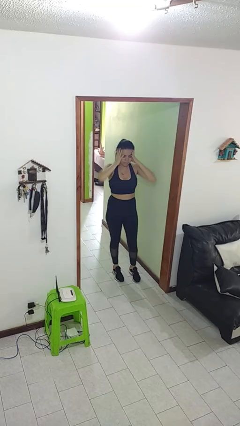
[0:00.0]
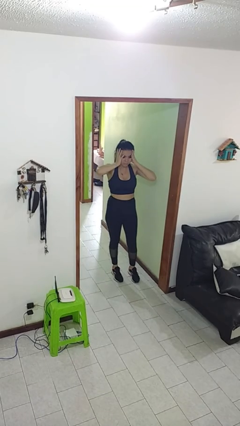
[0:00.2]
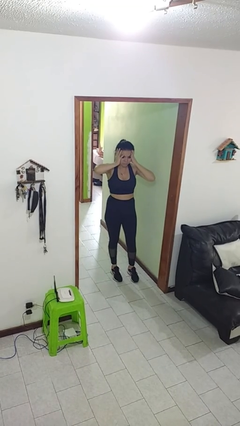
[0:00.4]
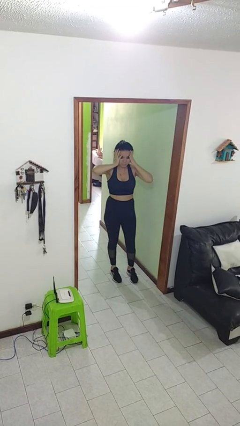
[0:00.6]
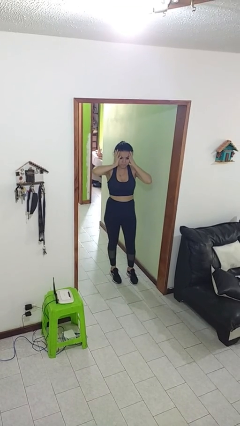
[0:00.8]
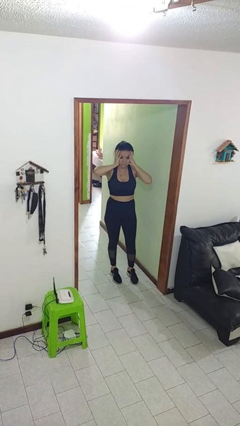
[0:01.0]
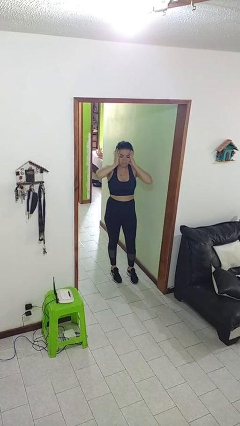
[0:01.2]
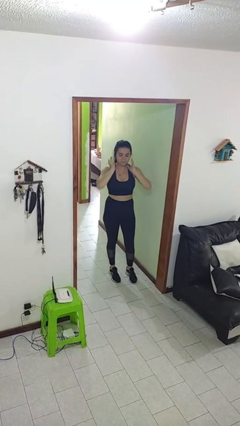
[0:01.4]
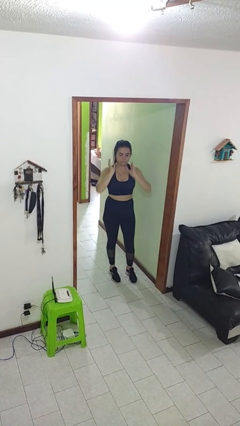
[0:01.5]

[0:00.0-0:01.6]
person covers face with hands

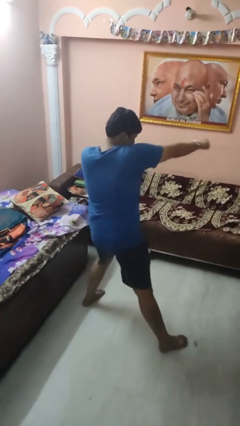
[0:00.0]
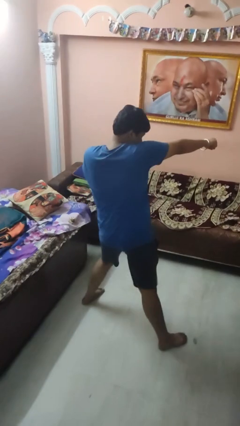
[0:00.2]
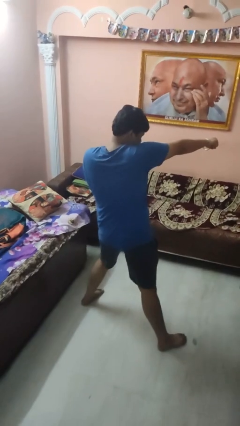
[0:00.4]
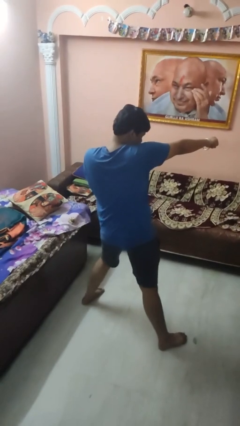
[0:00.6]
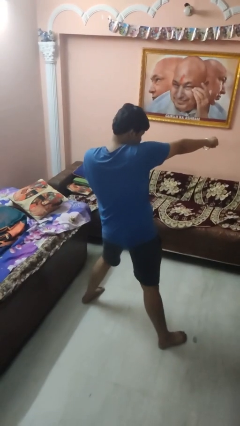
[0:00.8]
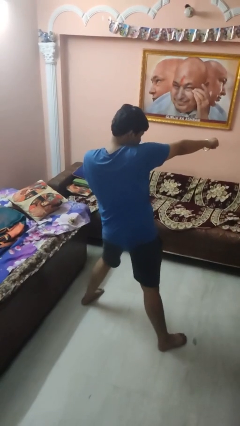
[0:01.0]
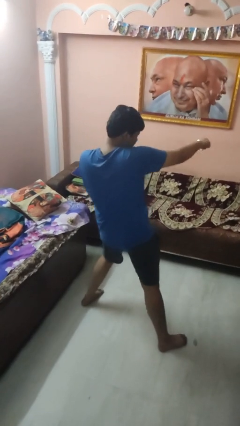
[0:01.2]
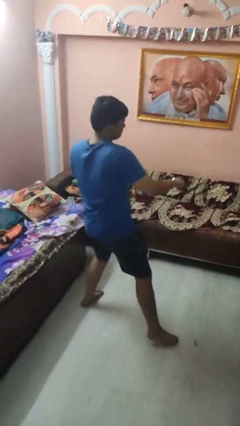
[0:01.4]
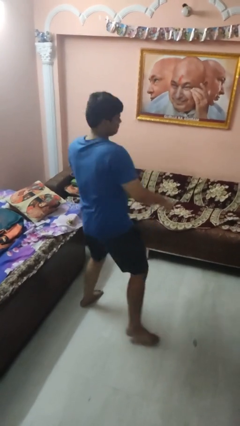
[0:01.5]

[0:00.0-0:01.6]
person punches

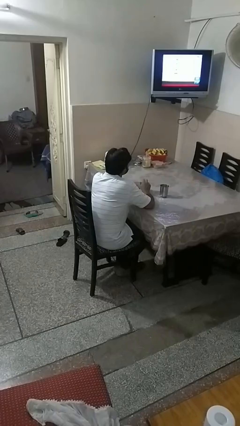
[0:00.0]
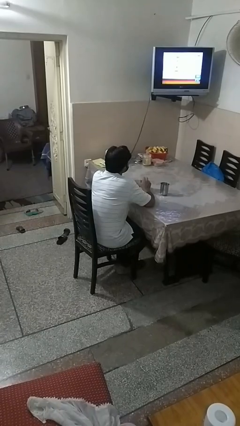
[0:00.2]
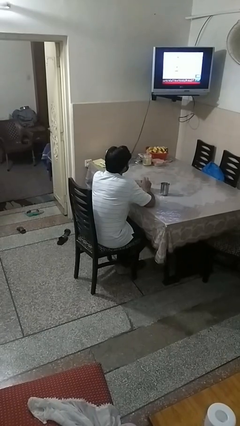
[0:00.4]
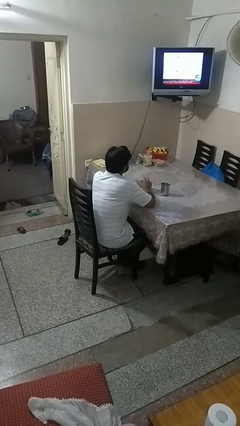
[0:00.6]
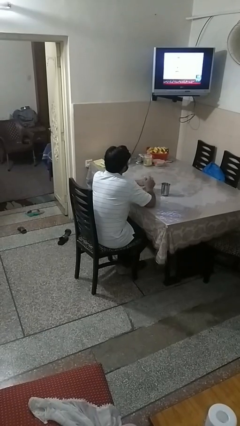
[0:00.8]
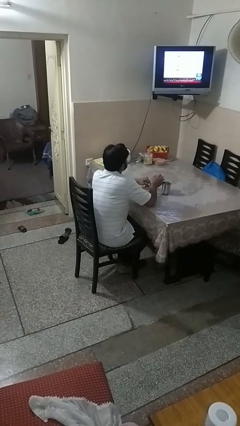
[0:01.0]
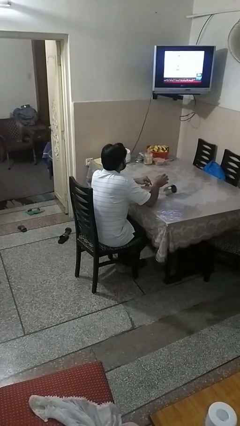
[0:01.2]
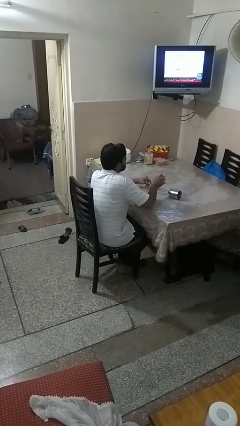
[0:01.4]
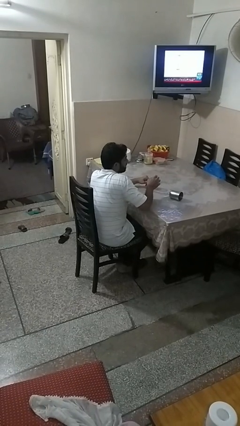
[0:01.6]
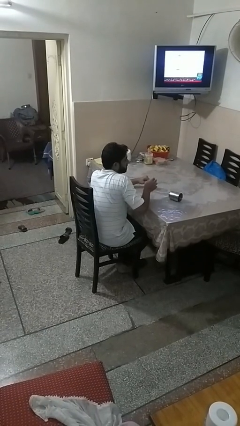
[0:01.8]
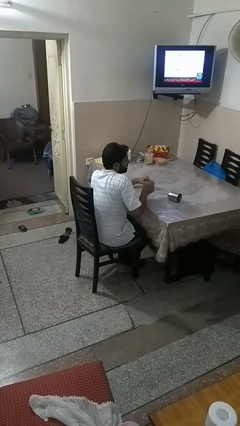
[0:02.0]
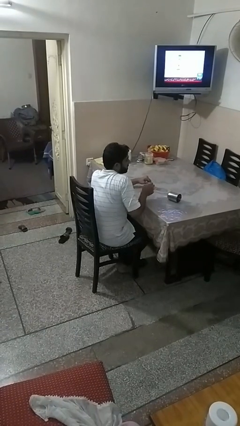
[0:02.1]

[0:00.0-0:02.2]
person knocks over glass

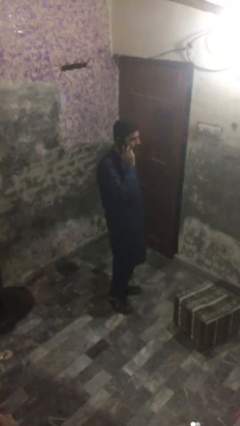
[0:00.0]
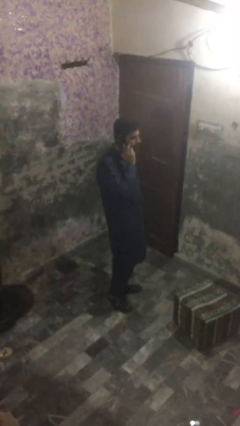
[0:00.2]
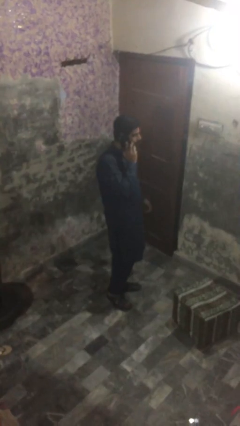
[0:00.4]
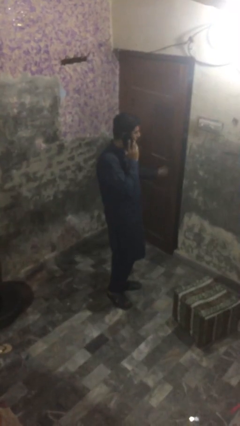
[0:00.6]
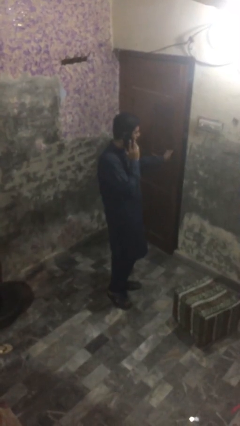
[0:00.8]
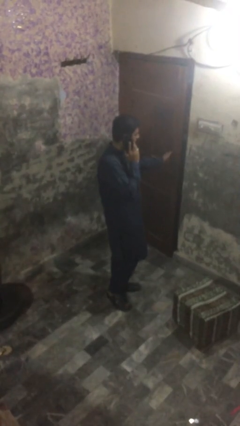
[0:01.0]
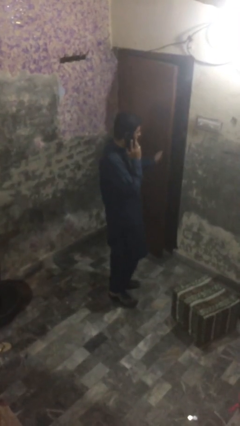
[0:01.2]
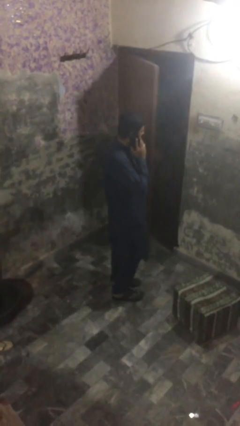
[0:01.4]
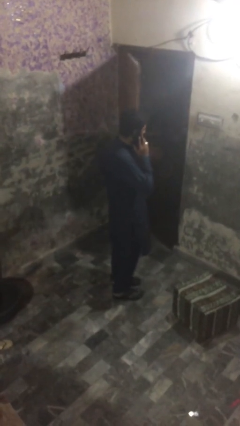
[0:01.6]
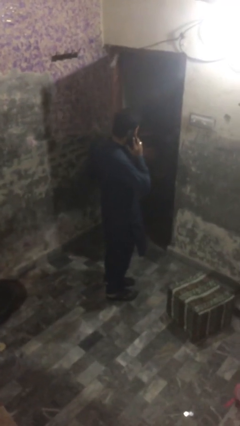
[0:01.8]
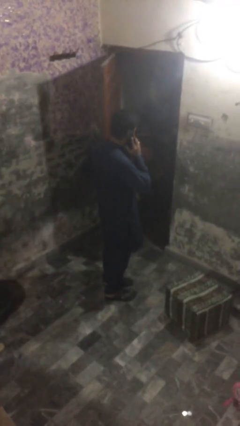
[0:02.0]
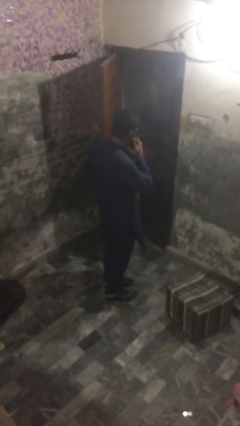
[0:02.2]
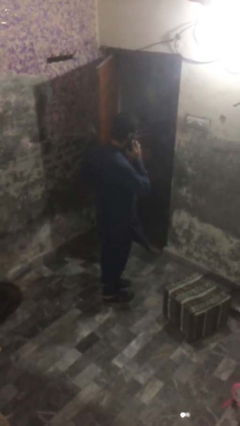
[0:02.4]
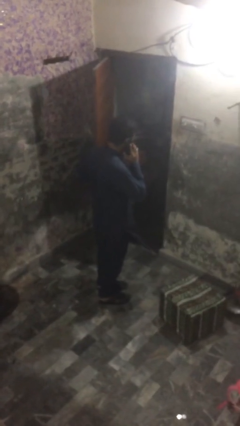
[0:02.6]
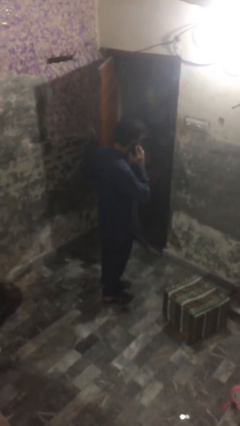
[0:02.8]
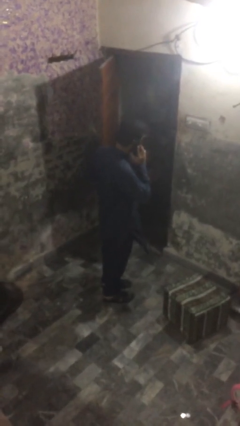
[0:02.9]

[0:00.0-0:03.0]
person opens facility door

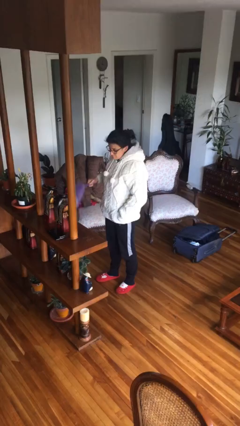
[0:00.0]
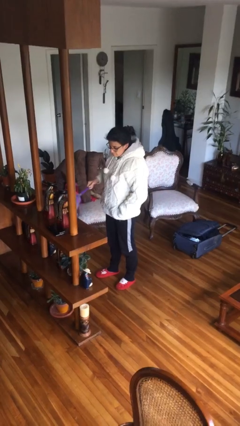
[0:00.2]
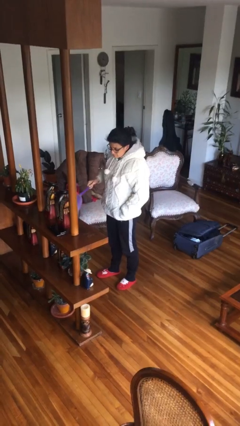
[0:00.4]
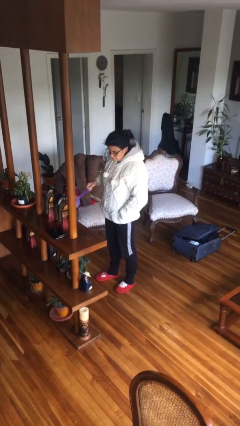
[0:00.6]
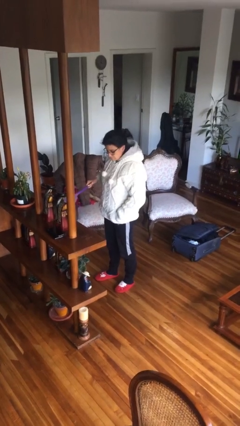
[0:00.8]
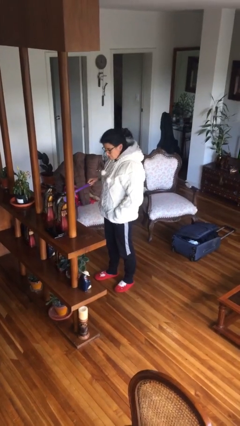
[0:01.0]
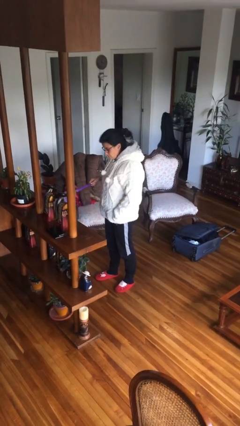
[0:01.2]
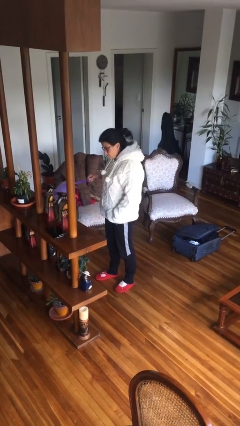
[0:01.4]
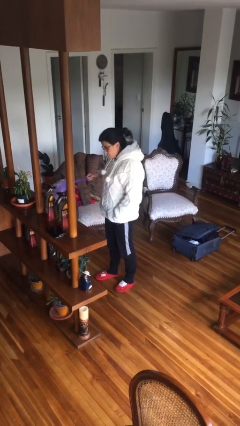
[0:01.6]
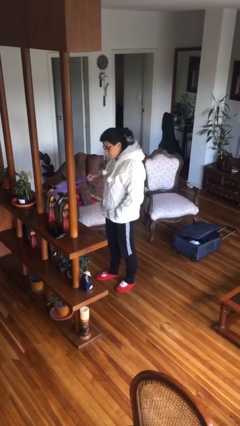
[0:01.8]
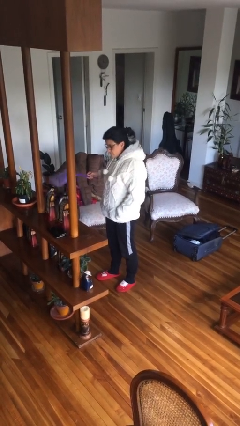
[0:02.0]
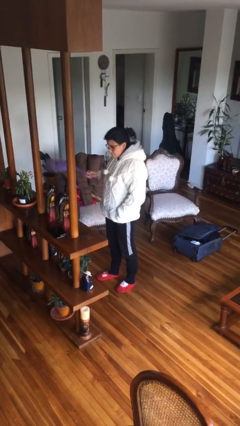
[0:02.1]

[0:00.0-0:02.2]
person dusts furniture

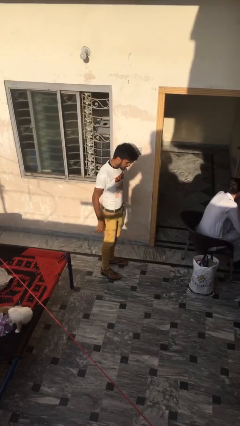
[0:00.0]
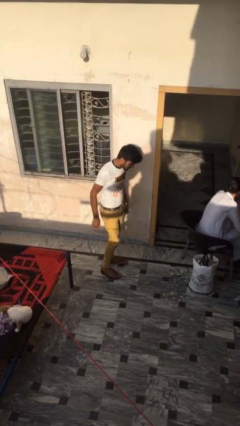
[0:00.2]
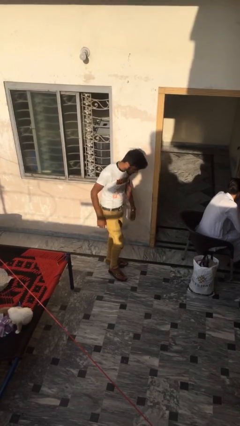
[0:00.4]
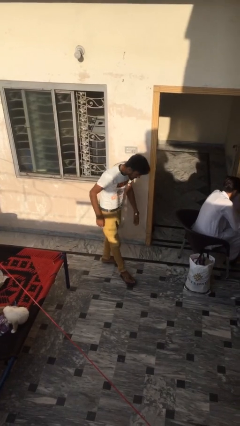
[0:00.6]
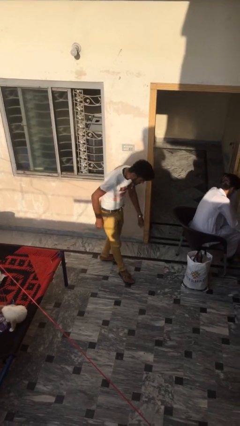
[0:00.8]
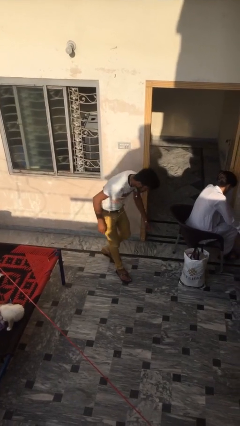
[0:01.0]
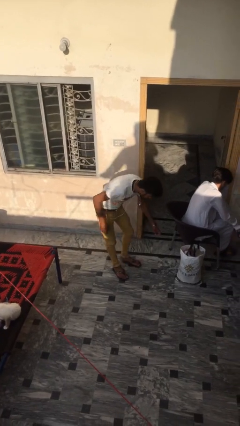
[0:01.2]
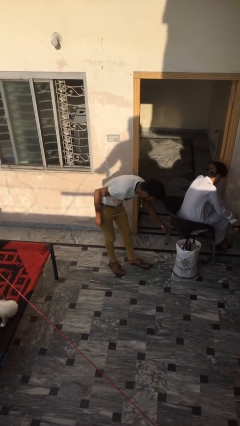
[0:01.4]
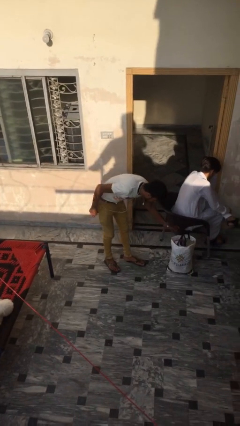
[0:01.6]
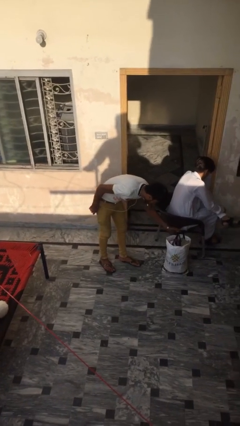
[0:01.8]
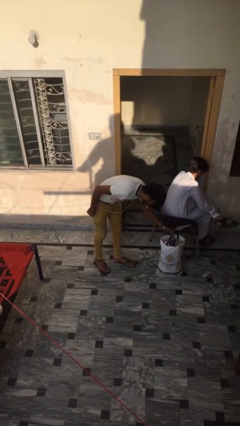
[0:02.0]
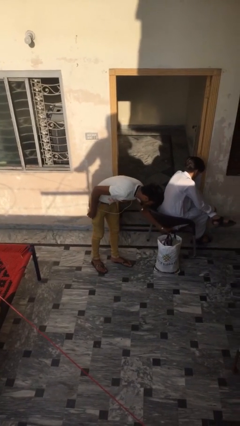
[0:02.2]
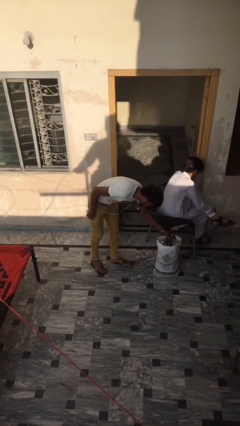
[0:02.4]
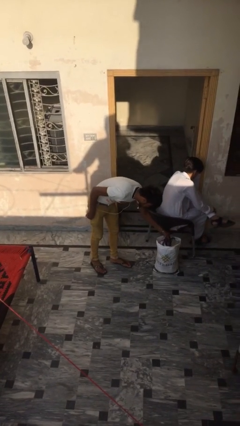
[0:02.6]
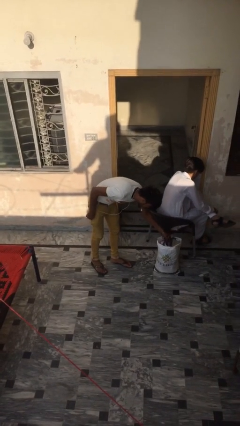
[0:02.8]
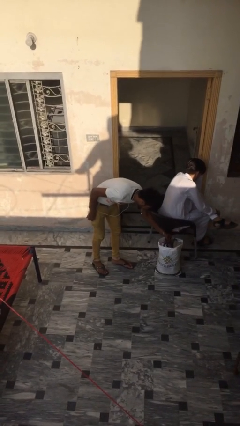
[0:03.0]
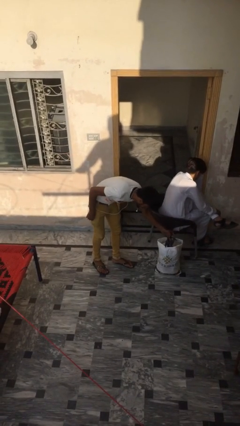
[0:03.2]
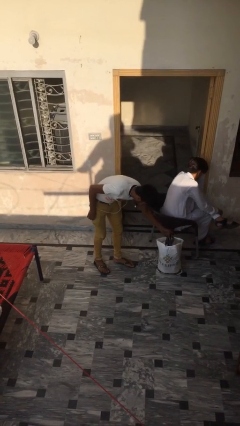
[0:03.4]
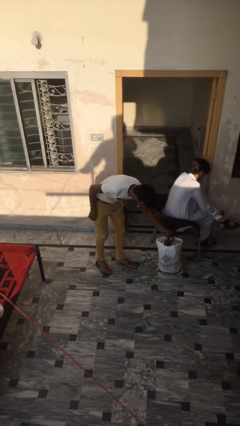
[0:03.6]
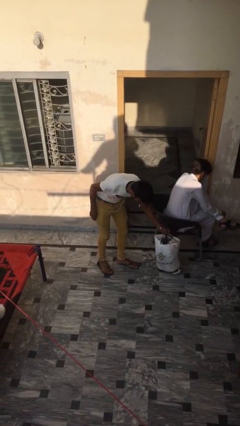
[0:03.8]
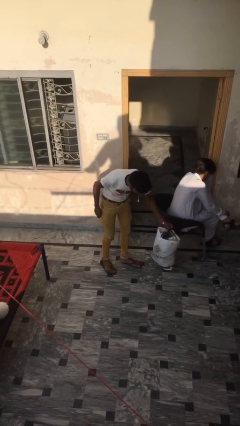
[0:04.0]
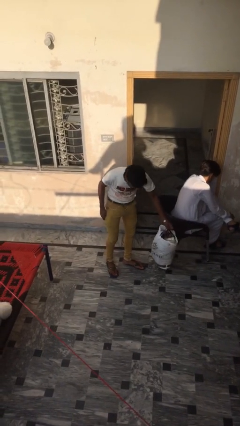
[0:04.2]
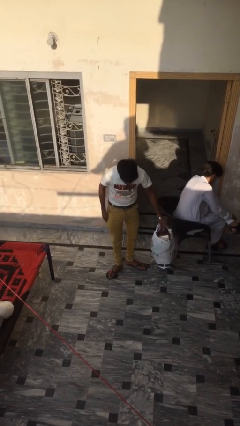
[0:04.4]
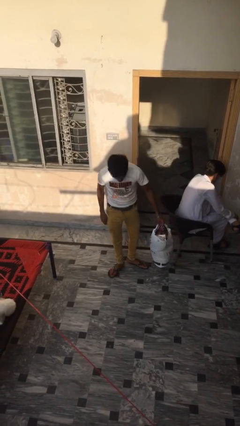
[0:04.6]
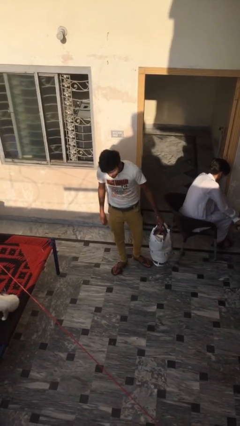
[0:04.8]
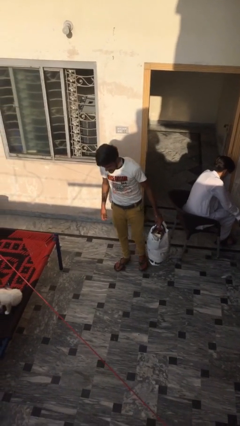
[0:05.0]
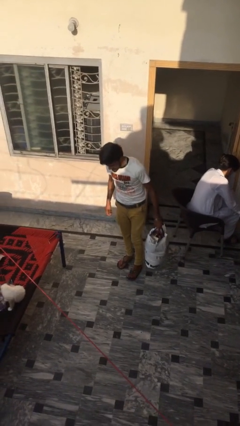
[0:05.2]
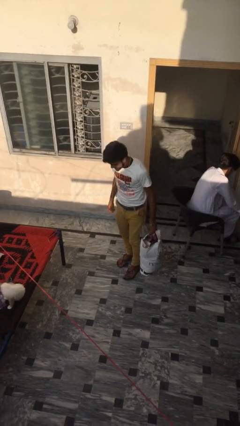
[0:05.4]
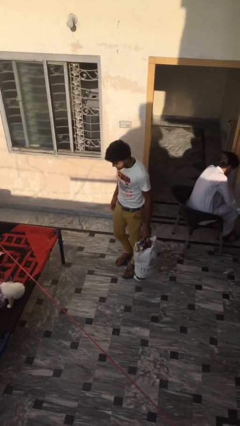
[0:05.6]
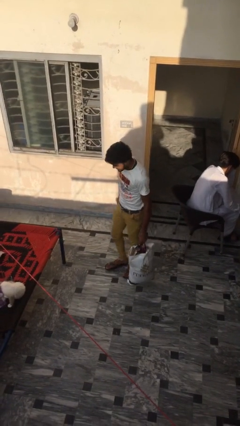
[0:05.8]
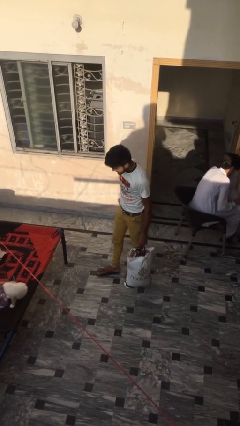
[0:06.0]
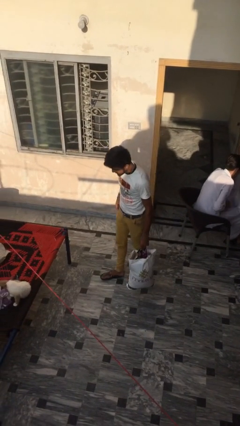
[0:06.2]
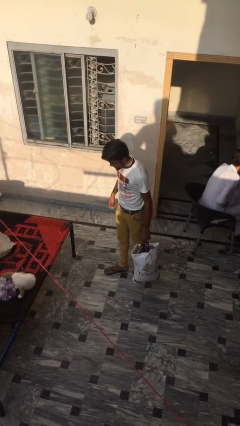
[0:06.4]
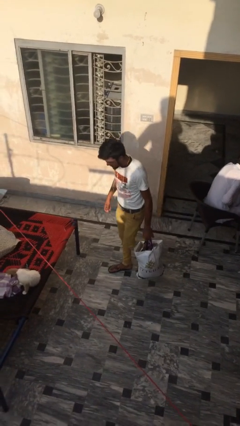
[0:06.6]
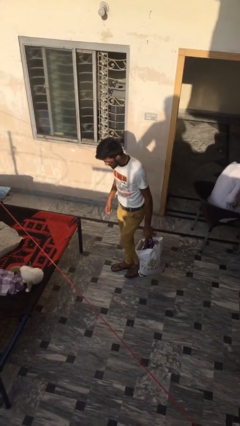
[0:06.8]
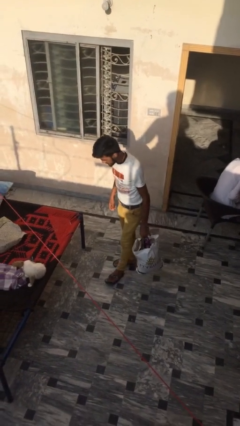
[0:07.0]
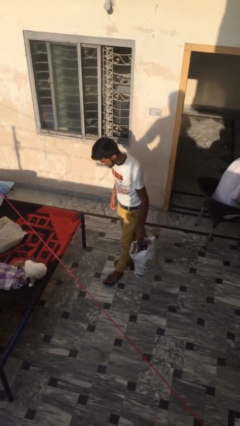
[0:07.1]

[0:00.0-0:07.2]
person steals object from person
